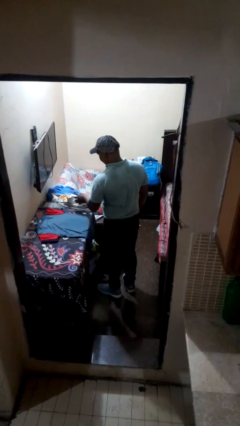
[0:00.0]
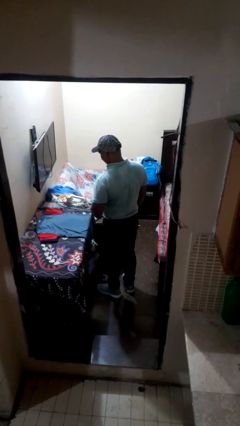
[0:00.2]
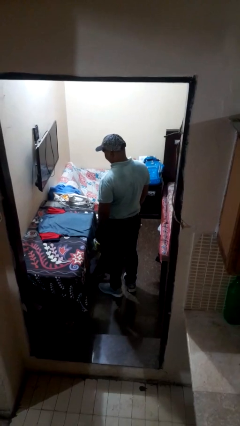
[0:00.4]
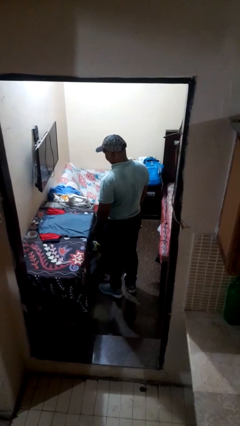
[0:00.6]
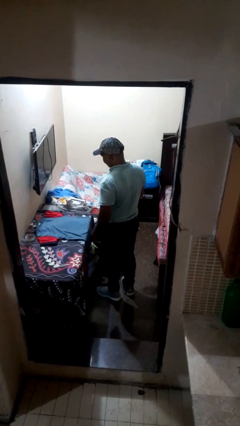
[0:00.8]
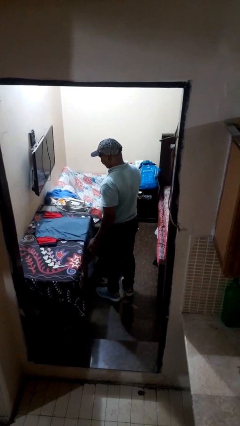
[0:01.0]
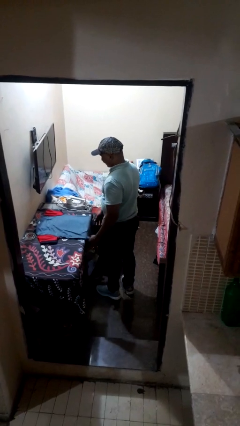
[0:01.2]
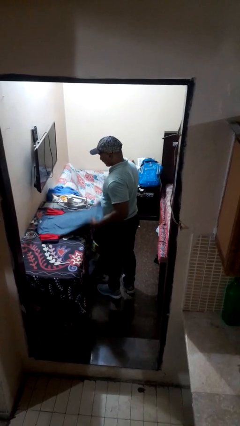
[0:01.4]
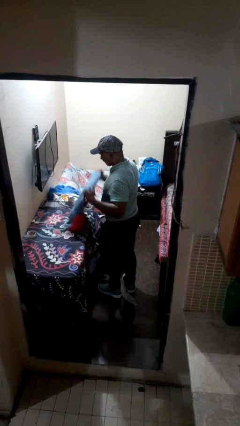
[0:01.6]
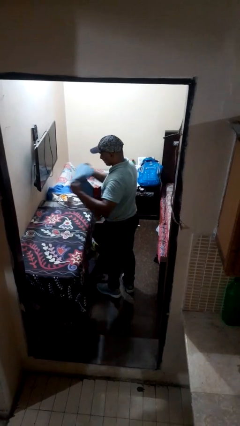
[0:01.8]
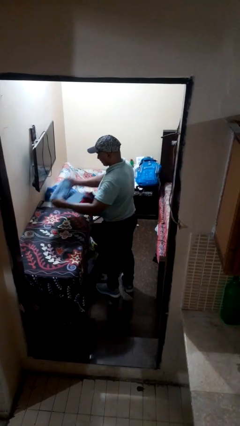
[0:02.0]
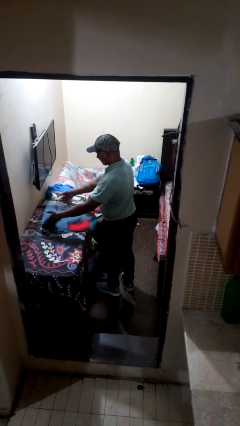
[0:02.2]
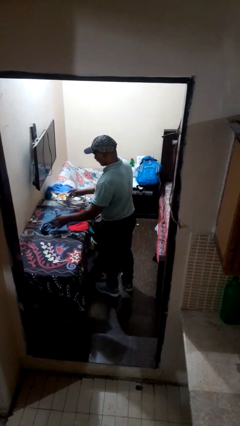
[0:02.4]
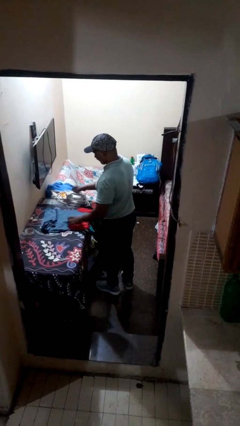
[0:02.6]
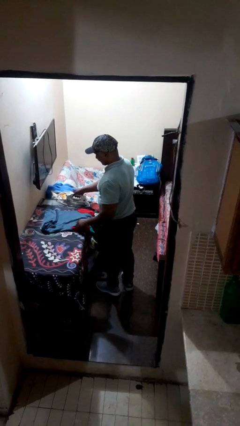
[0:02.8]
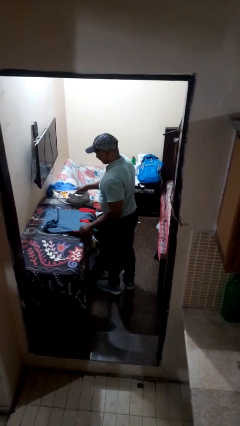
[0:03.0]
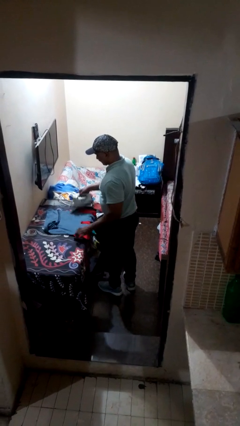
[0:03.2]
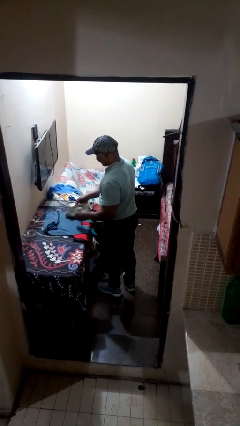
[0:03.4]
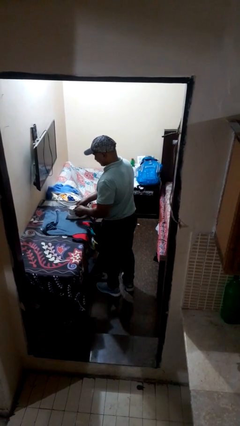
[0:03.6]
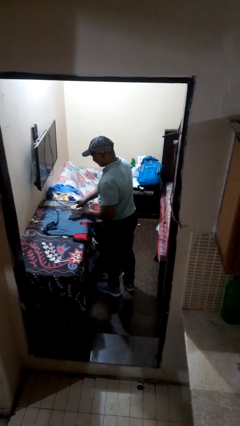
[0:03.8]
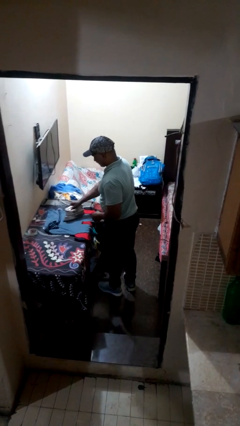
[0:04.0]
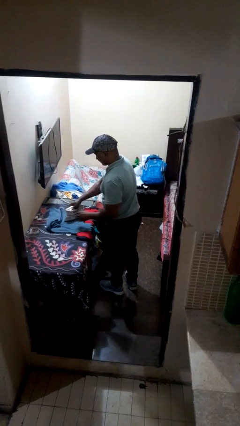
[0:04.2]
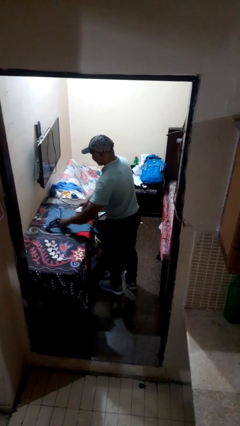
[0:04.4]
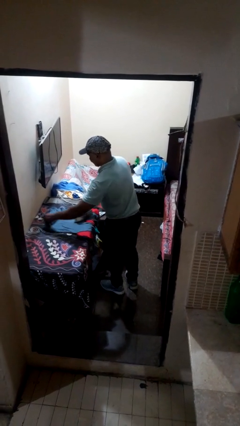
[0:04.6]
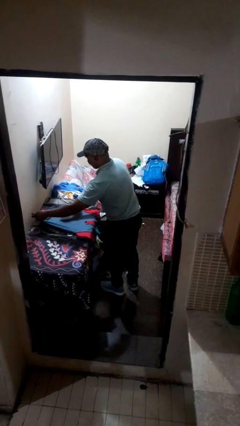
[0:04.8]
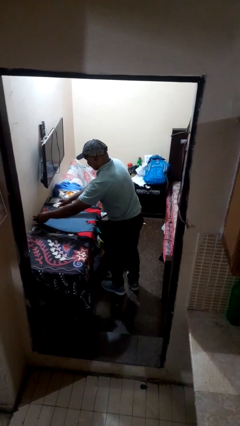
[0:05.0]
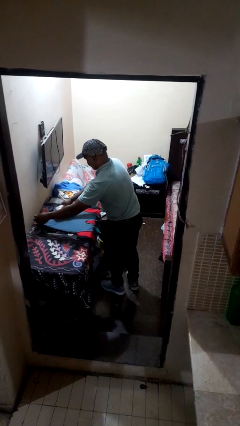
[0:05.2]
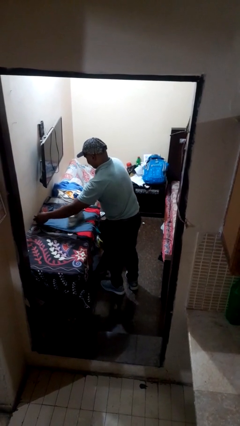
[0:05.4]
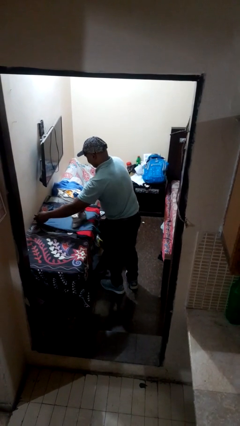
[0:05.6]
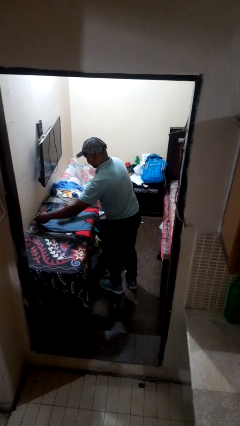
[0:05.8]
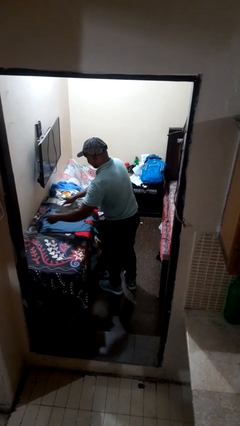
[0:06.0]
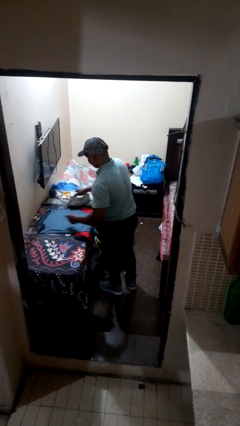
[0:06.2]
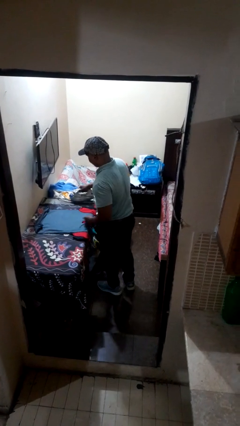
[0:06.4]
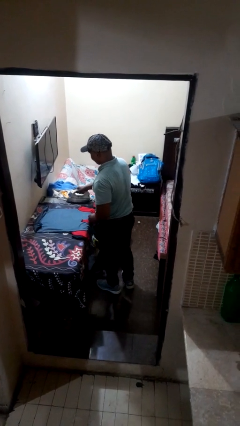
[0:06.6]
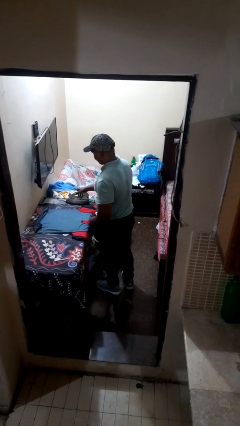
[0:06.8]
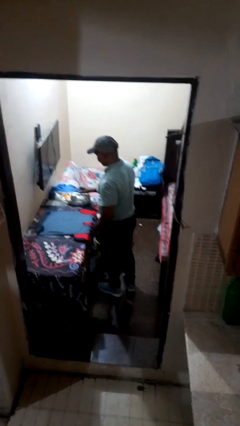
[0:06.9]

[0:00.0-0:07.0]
person irons clothes

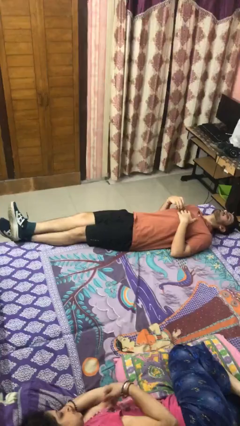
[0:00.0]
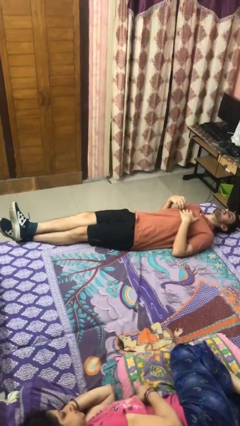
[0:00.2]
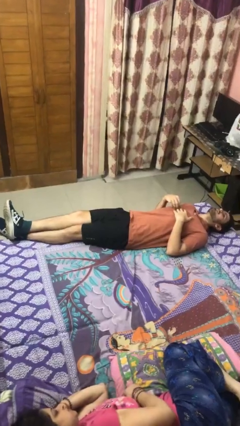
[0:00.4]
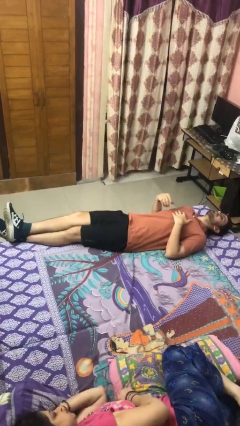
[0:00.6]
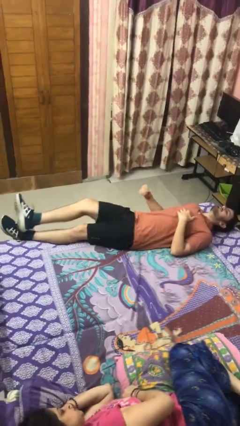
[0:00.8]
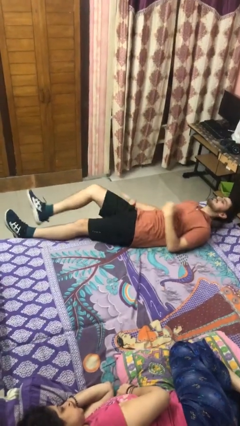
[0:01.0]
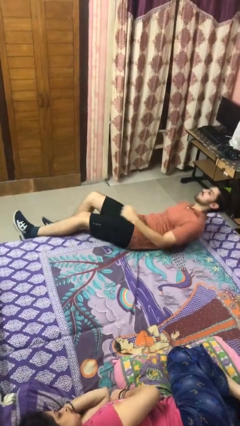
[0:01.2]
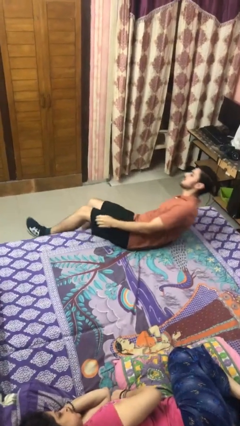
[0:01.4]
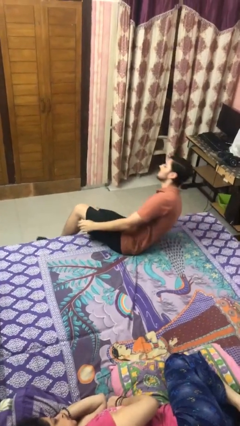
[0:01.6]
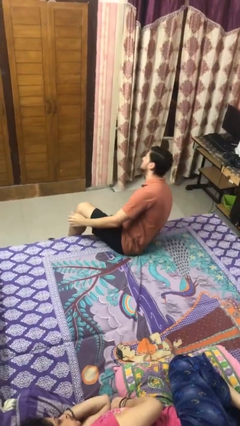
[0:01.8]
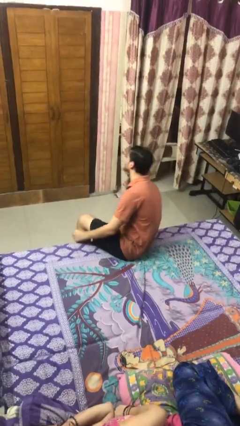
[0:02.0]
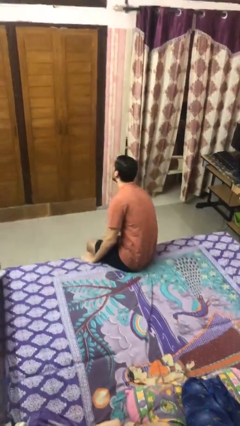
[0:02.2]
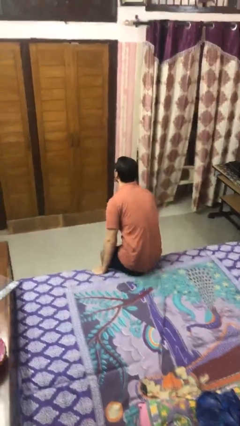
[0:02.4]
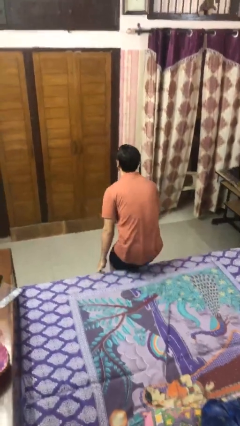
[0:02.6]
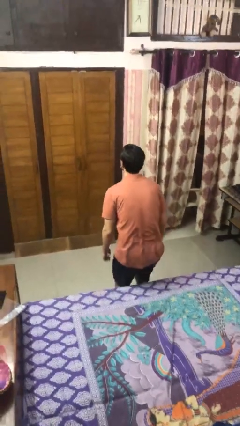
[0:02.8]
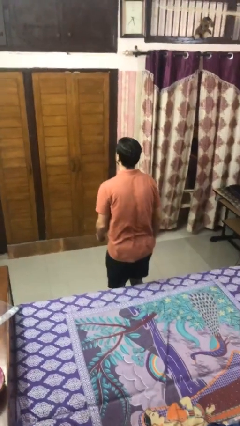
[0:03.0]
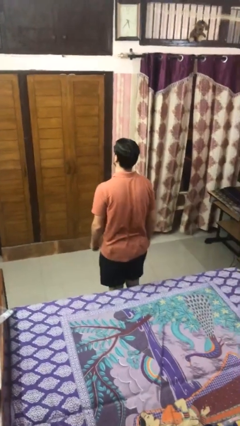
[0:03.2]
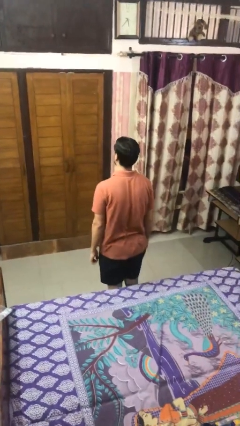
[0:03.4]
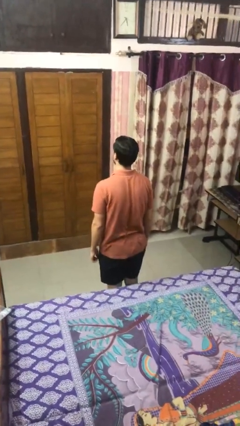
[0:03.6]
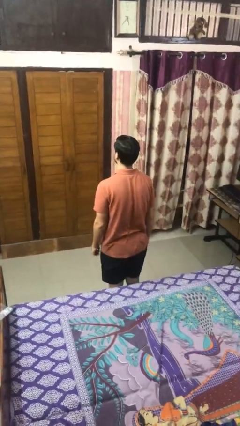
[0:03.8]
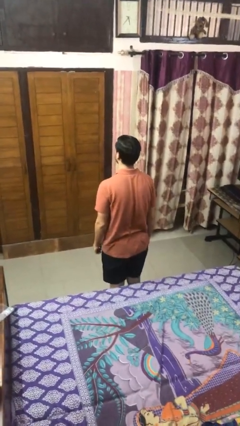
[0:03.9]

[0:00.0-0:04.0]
person stands up

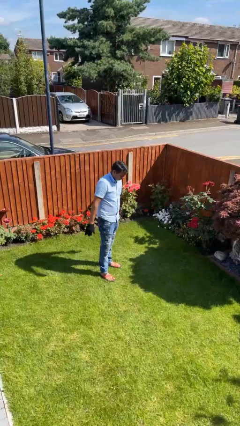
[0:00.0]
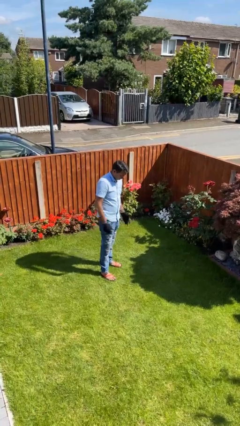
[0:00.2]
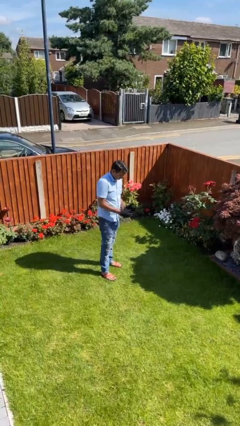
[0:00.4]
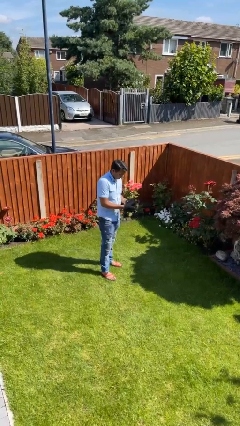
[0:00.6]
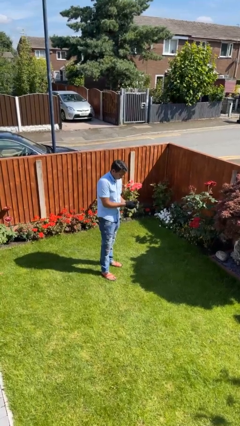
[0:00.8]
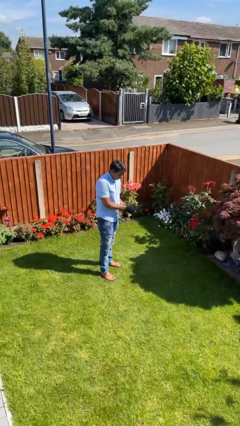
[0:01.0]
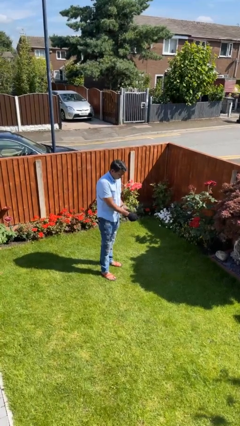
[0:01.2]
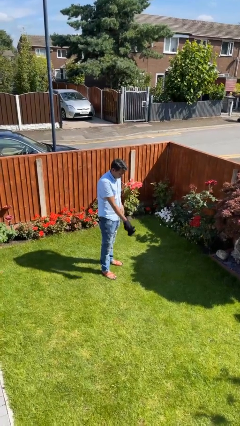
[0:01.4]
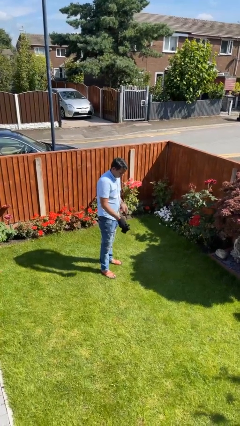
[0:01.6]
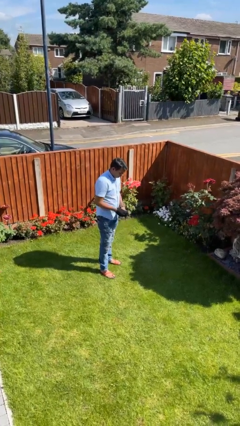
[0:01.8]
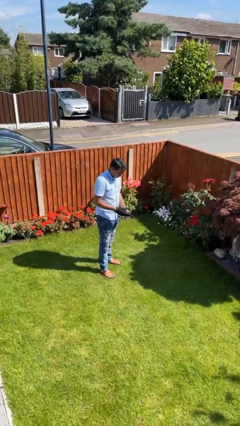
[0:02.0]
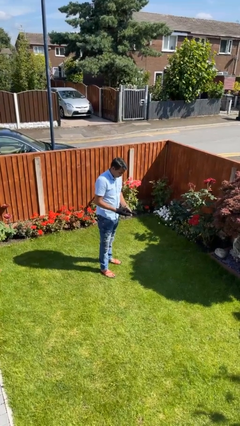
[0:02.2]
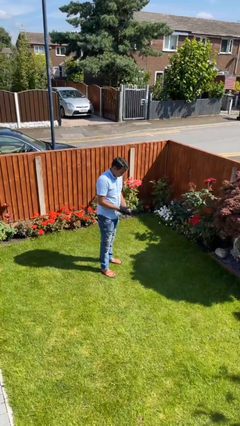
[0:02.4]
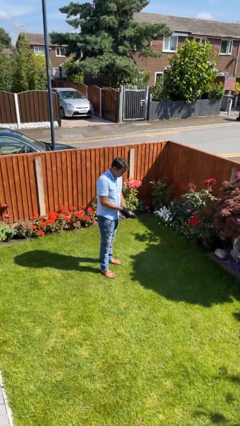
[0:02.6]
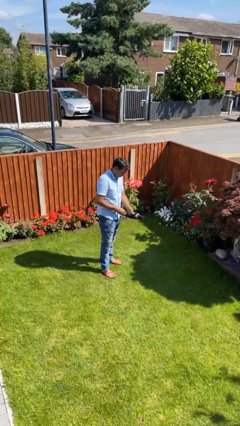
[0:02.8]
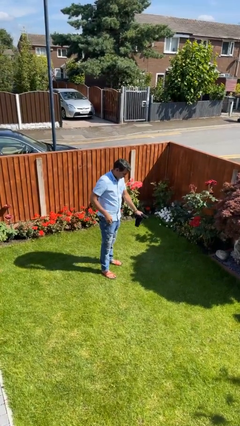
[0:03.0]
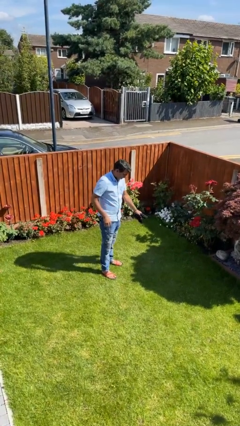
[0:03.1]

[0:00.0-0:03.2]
person takes off gloves

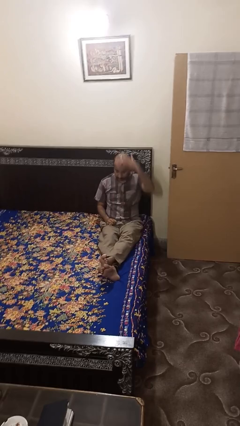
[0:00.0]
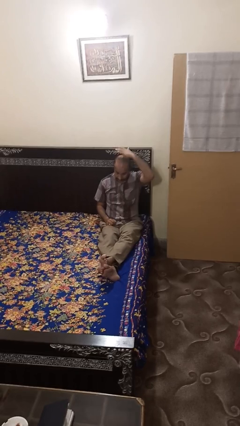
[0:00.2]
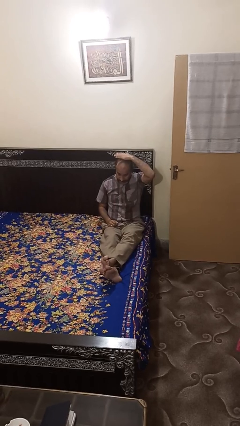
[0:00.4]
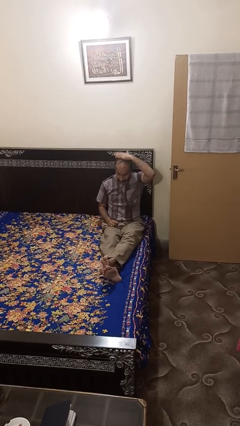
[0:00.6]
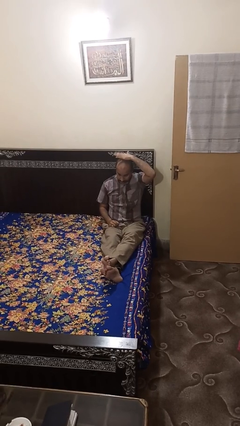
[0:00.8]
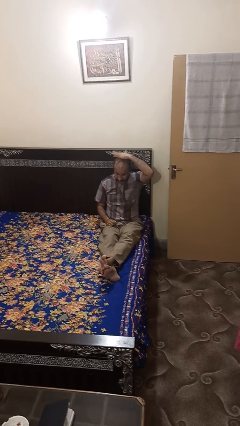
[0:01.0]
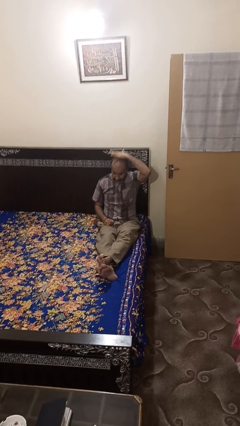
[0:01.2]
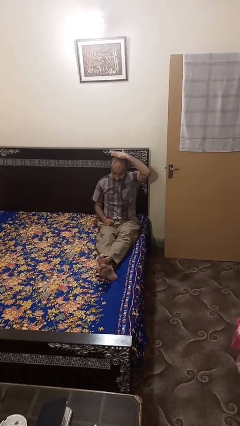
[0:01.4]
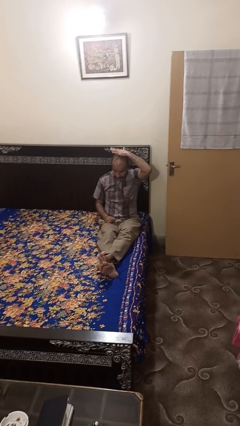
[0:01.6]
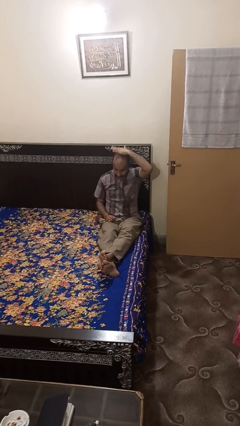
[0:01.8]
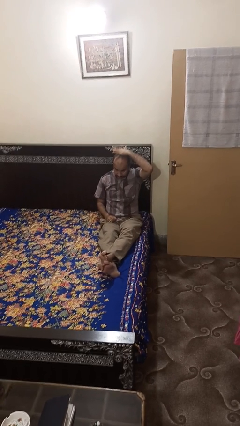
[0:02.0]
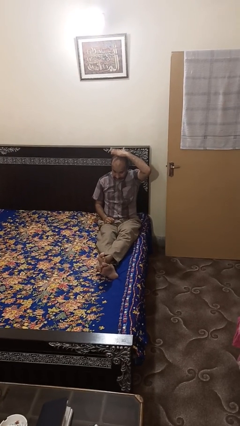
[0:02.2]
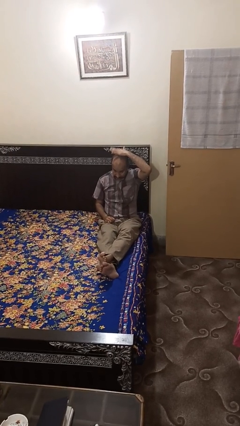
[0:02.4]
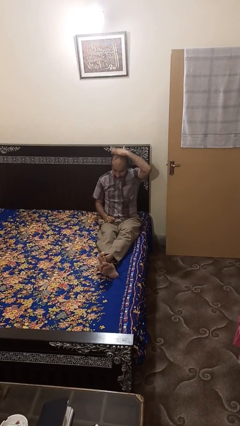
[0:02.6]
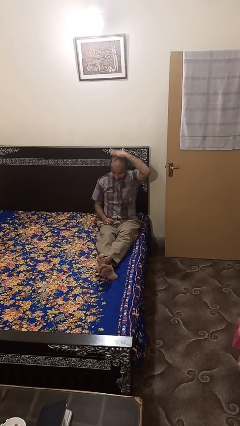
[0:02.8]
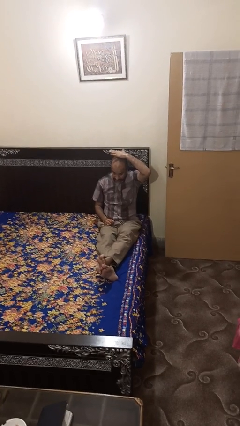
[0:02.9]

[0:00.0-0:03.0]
person pats head

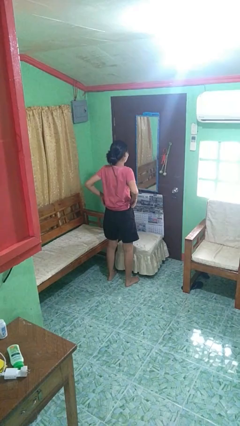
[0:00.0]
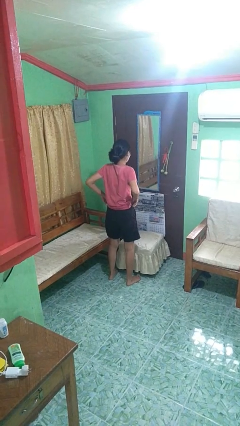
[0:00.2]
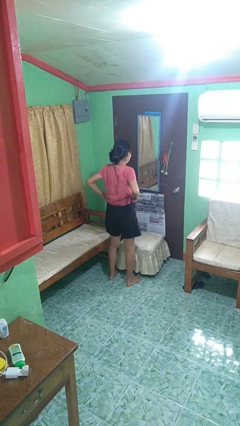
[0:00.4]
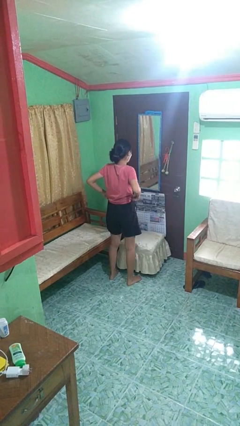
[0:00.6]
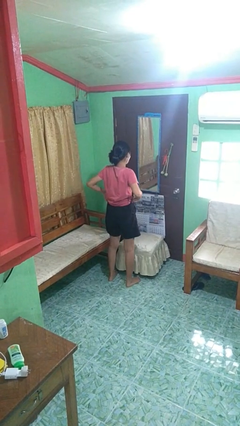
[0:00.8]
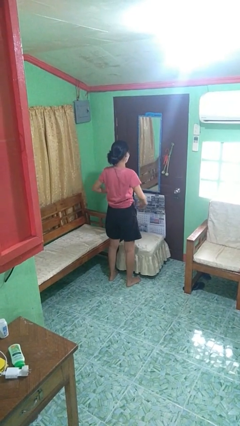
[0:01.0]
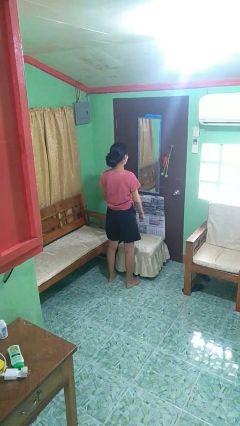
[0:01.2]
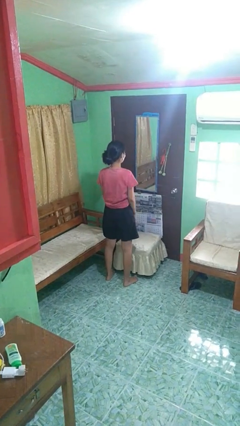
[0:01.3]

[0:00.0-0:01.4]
person hikes up pants
